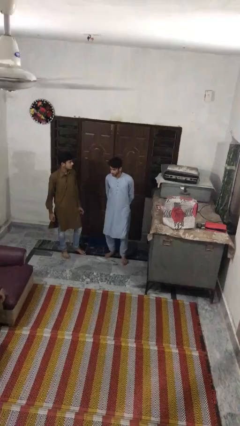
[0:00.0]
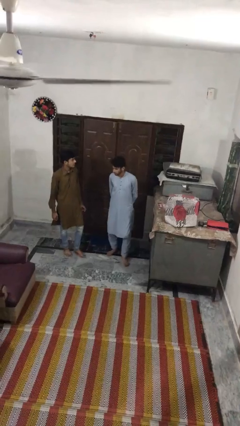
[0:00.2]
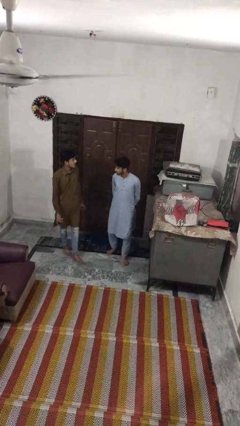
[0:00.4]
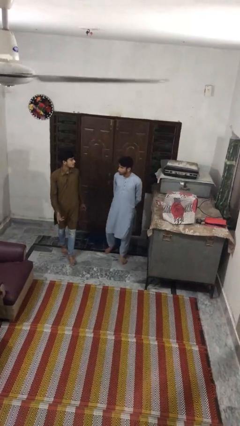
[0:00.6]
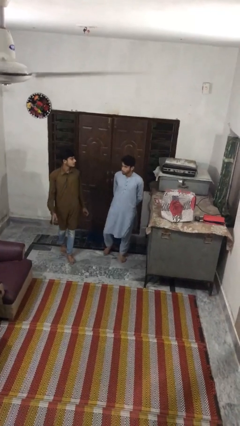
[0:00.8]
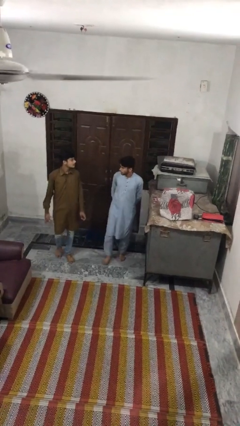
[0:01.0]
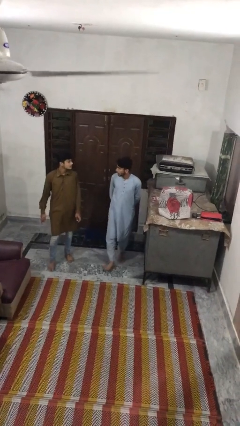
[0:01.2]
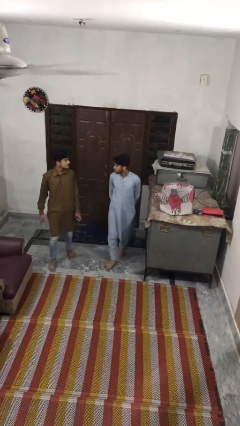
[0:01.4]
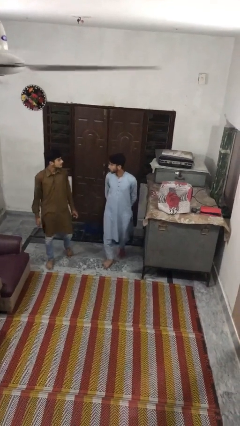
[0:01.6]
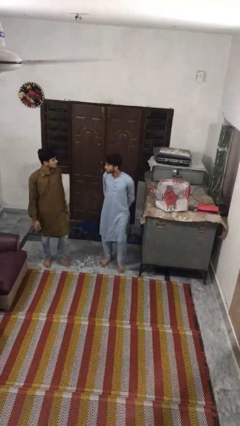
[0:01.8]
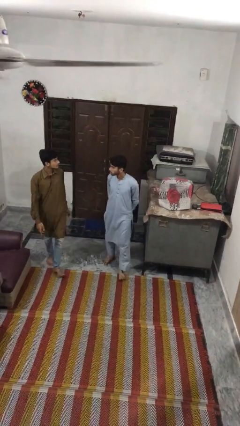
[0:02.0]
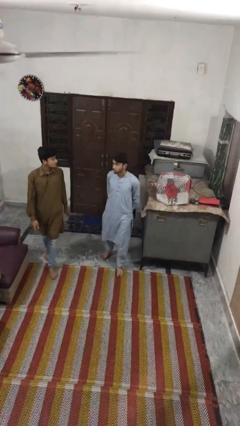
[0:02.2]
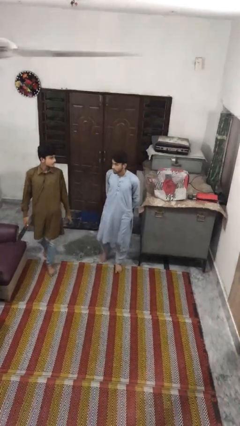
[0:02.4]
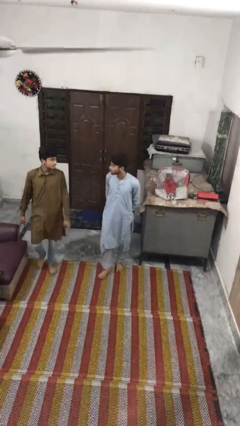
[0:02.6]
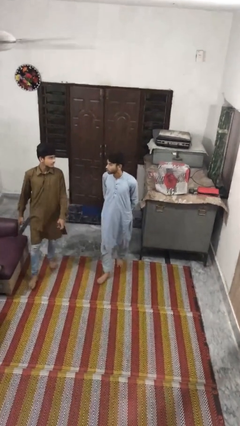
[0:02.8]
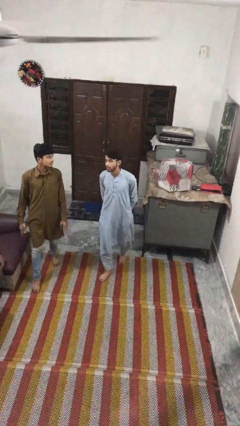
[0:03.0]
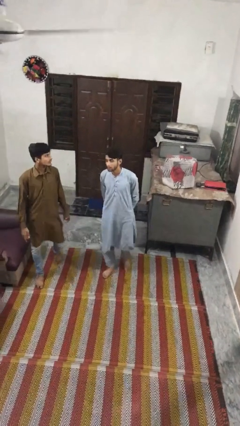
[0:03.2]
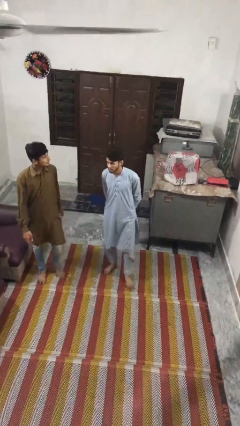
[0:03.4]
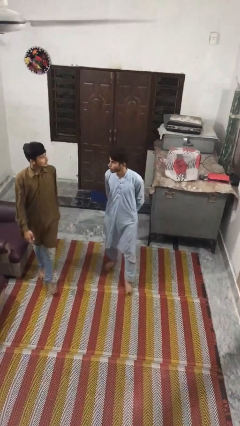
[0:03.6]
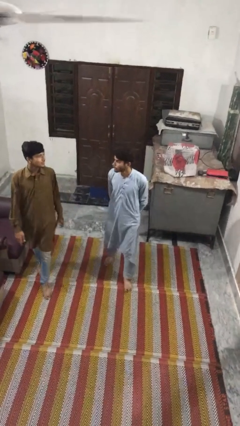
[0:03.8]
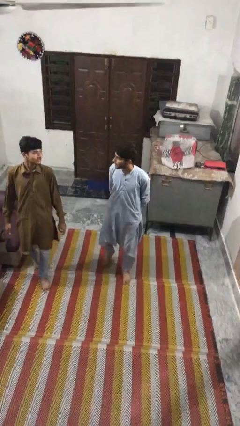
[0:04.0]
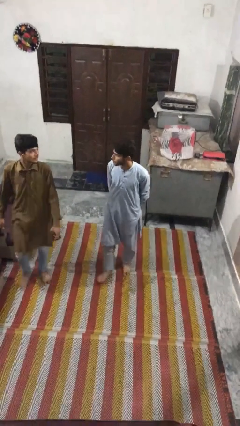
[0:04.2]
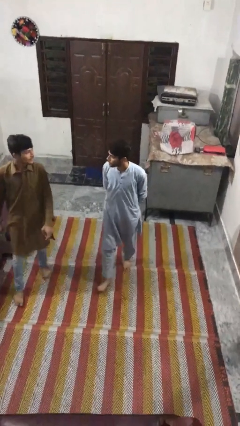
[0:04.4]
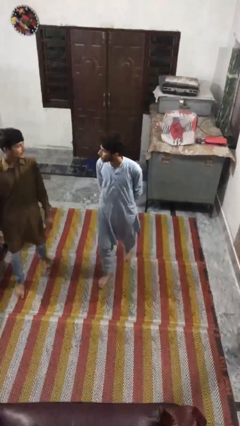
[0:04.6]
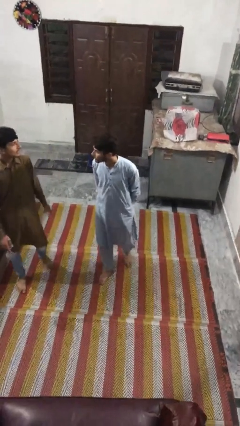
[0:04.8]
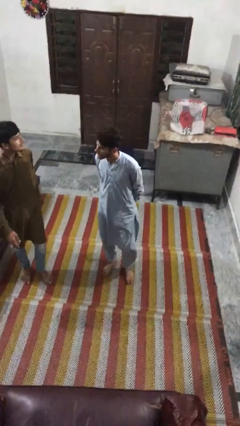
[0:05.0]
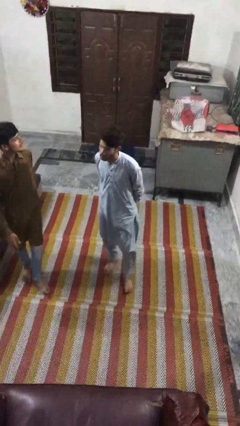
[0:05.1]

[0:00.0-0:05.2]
person talks to person

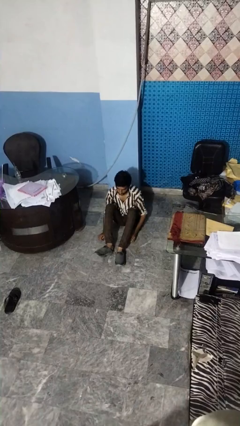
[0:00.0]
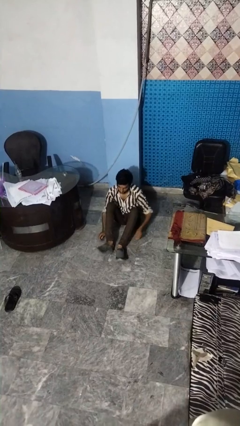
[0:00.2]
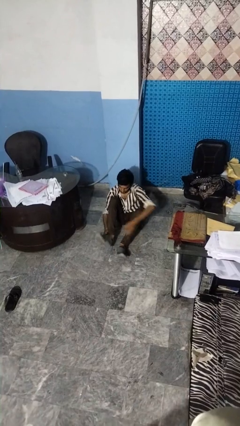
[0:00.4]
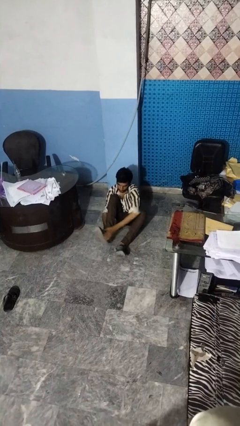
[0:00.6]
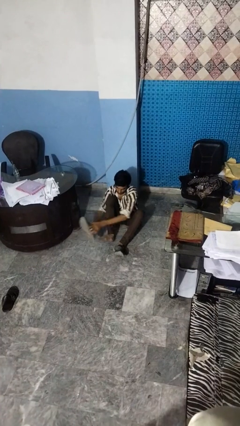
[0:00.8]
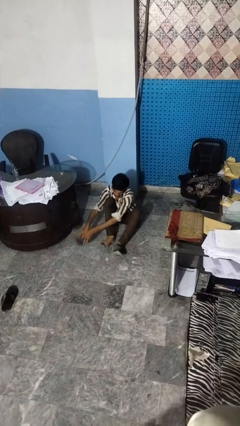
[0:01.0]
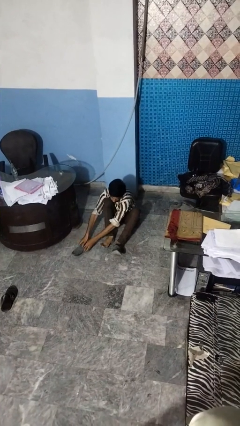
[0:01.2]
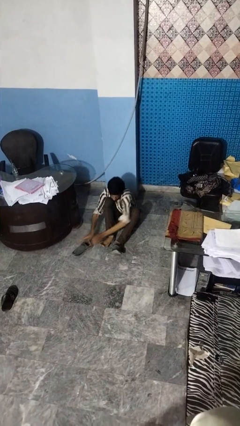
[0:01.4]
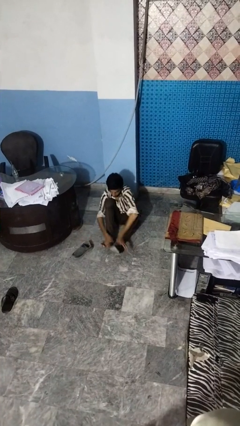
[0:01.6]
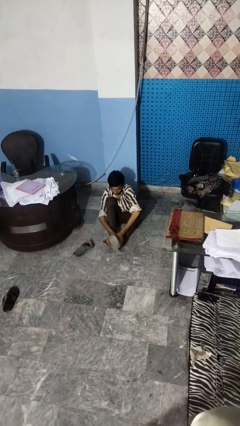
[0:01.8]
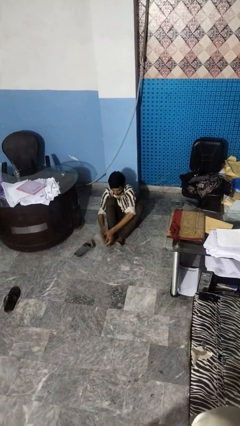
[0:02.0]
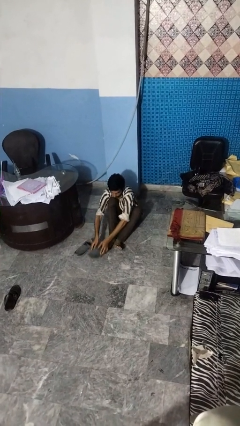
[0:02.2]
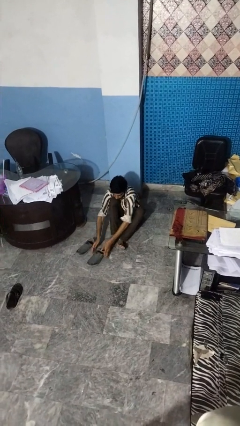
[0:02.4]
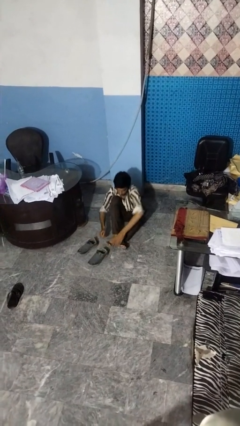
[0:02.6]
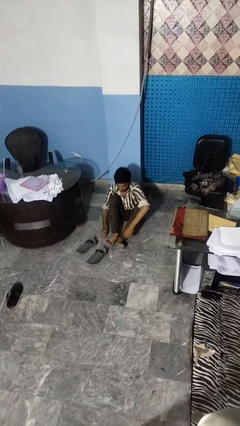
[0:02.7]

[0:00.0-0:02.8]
person takes off shoes

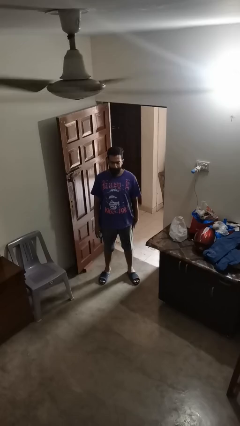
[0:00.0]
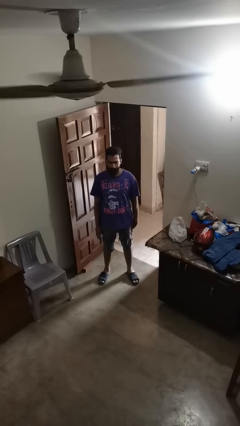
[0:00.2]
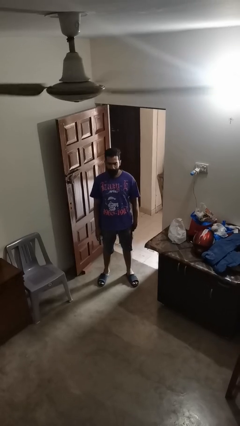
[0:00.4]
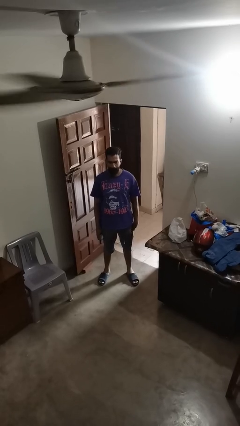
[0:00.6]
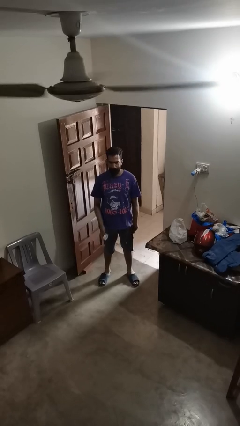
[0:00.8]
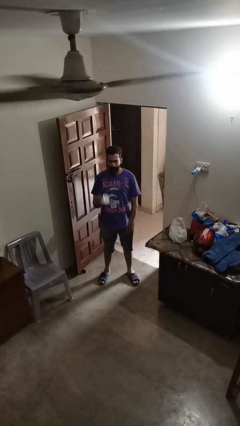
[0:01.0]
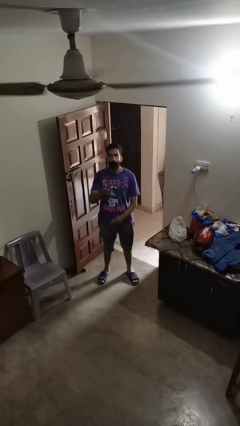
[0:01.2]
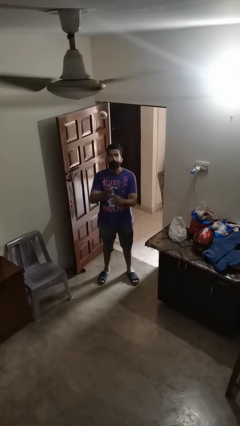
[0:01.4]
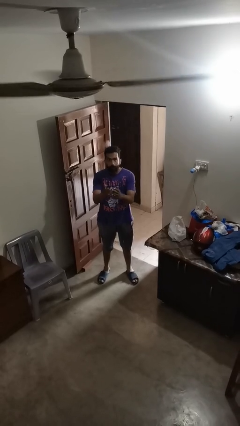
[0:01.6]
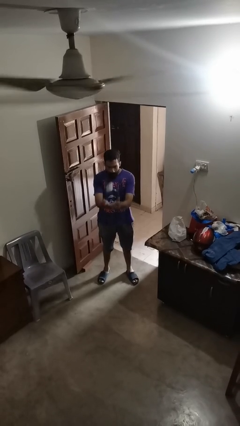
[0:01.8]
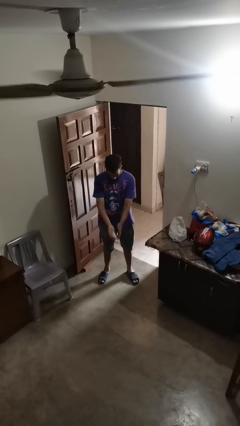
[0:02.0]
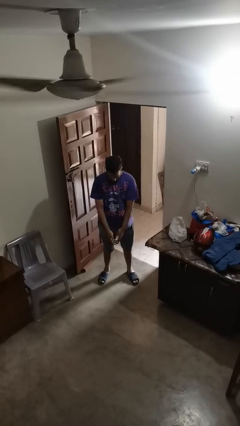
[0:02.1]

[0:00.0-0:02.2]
person drops object

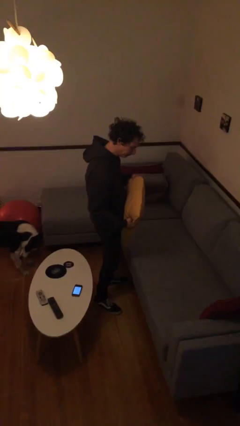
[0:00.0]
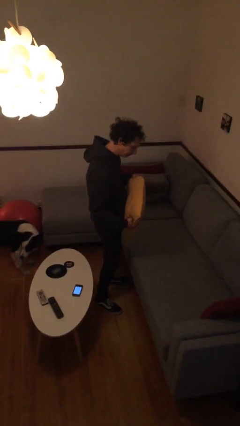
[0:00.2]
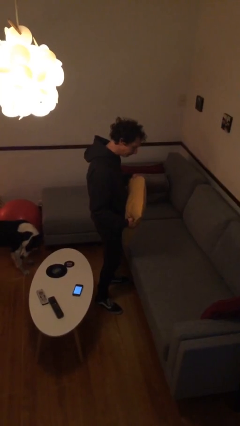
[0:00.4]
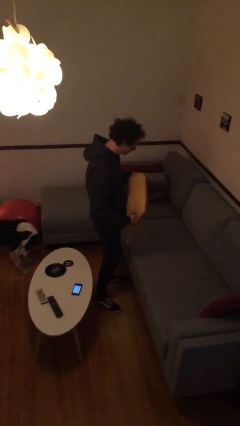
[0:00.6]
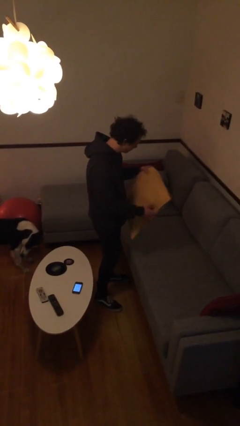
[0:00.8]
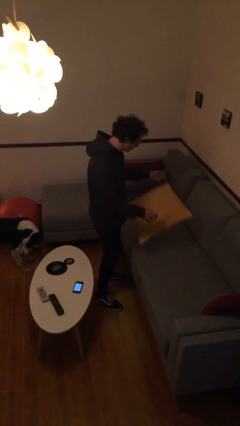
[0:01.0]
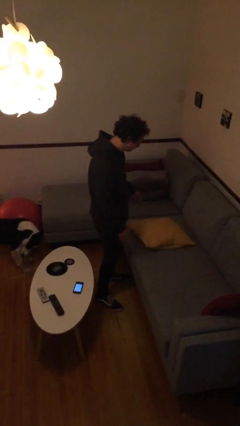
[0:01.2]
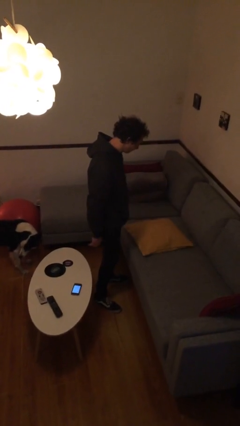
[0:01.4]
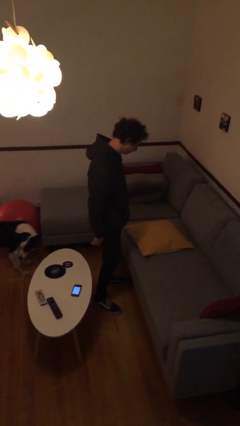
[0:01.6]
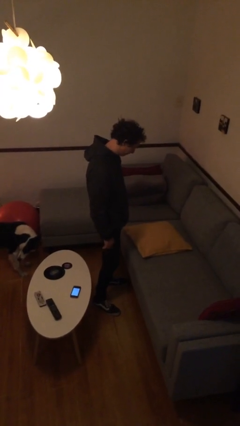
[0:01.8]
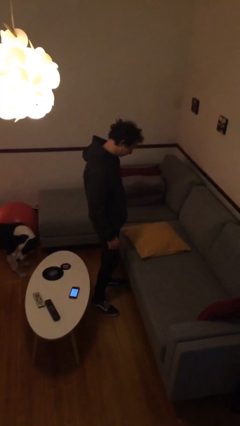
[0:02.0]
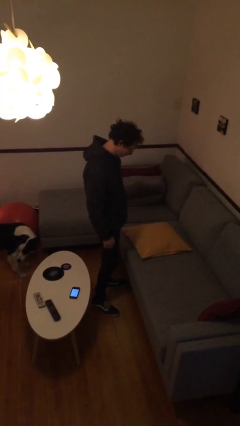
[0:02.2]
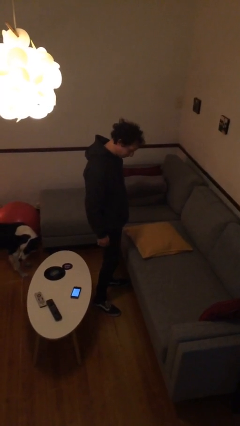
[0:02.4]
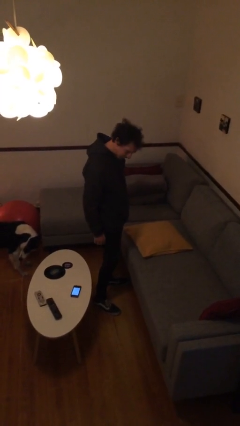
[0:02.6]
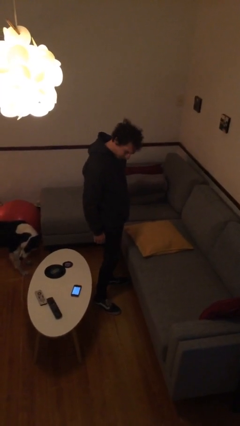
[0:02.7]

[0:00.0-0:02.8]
person puts down object on couch

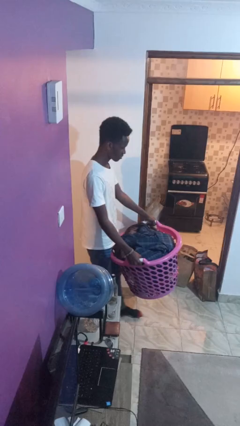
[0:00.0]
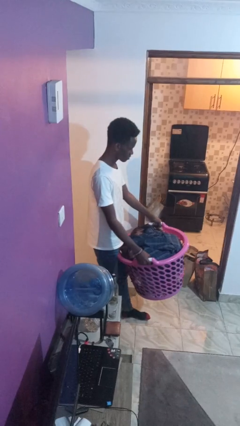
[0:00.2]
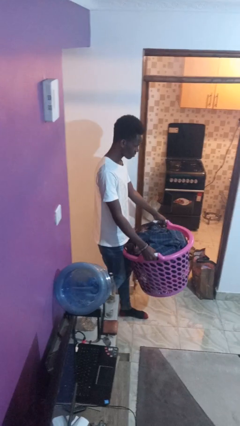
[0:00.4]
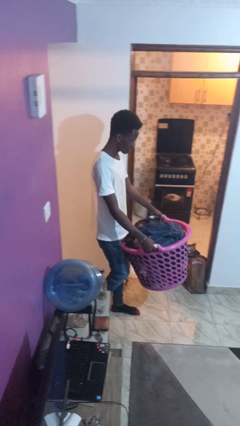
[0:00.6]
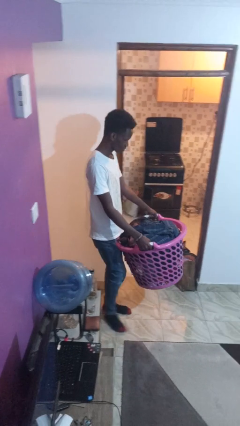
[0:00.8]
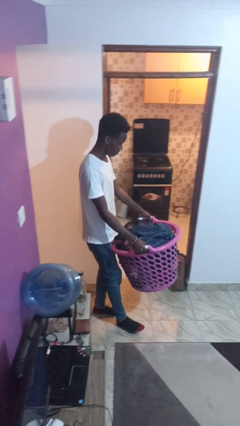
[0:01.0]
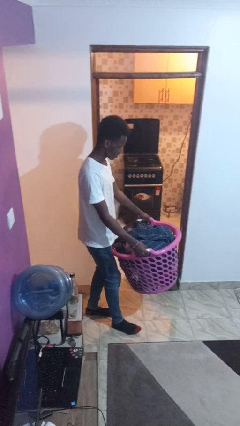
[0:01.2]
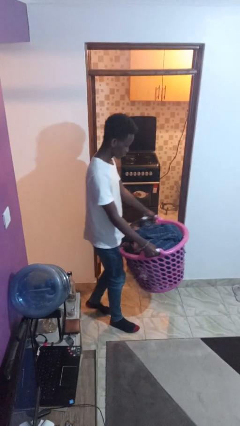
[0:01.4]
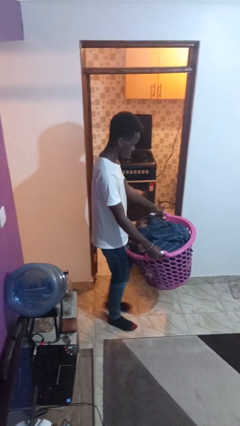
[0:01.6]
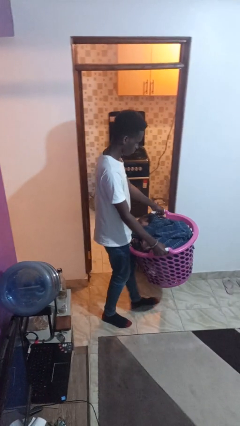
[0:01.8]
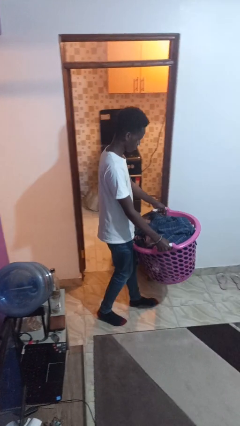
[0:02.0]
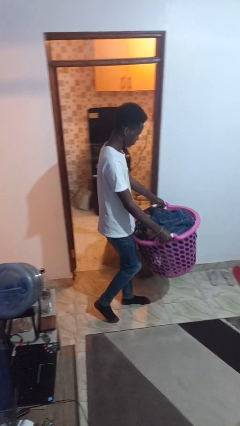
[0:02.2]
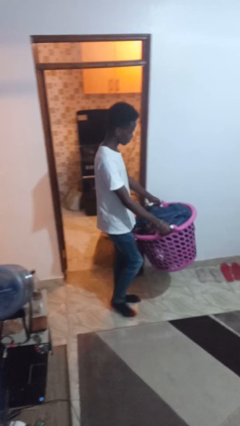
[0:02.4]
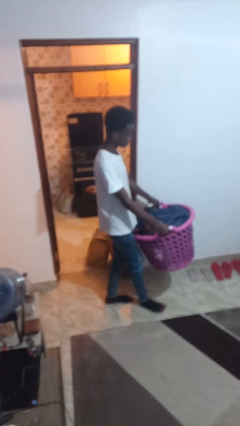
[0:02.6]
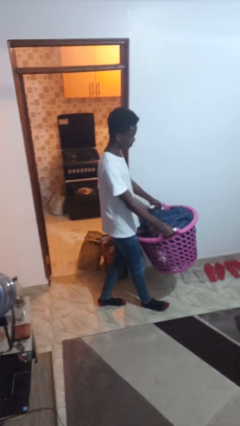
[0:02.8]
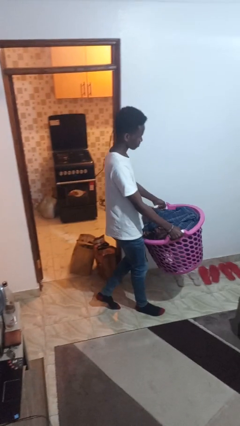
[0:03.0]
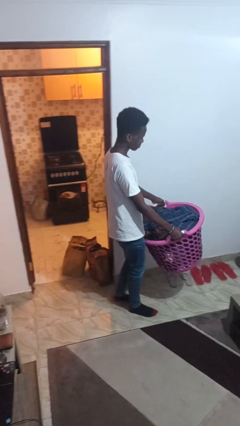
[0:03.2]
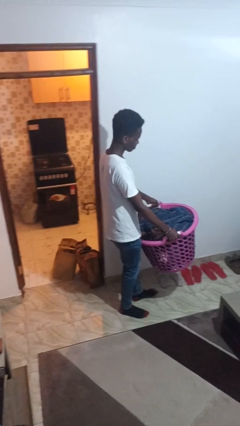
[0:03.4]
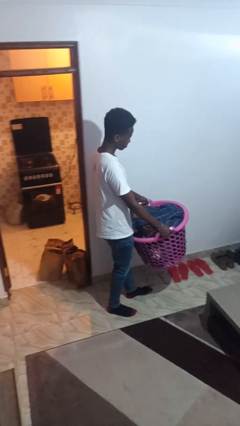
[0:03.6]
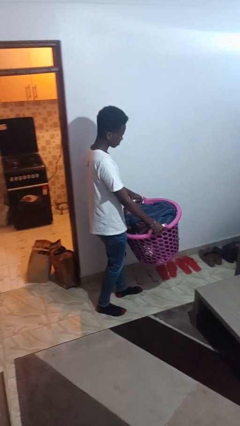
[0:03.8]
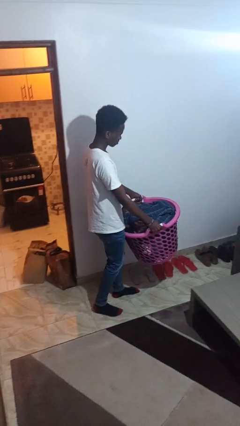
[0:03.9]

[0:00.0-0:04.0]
person carries laundry basket

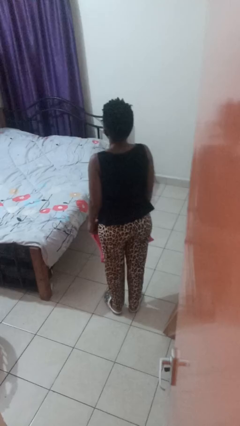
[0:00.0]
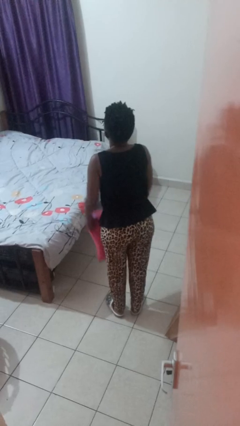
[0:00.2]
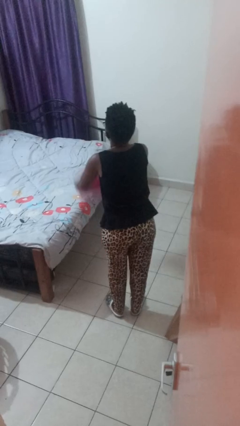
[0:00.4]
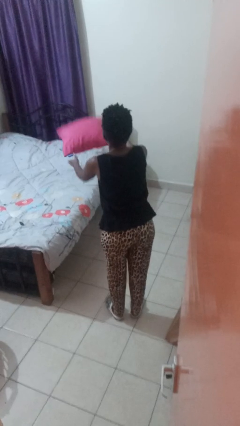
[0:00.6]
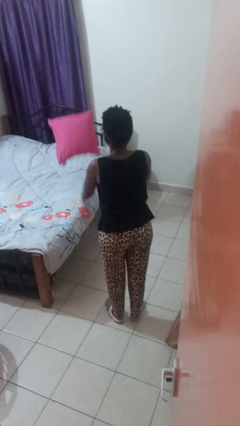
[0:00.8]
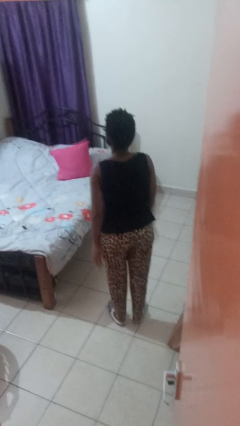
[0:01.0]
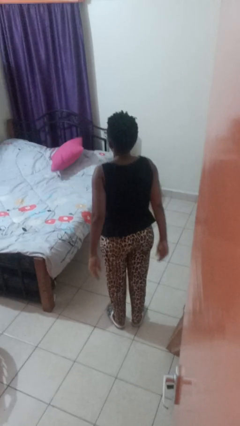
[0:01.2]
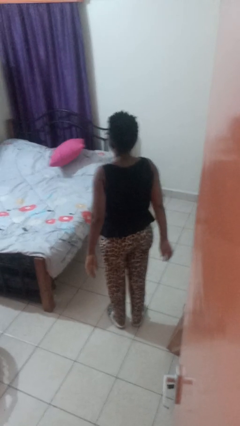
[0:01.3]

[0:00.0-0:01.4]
person throws object on bed
